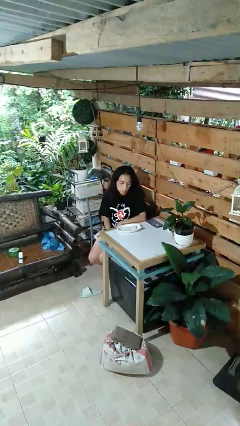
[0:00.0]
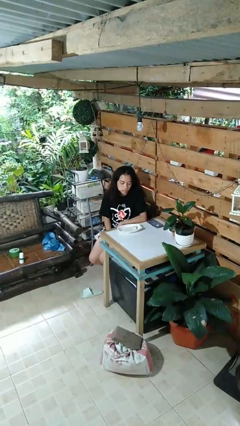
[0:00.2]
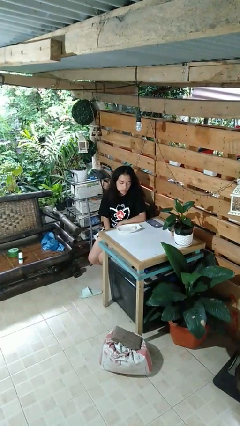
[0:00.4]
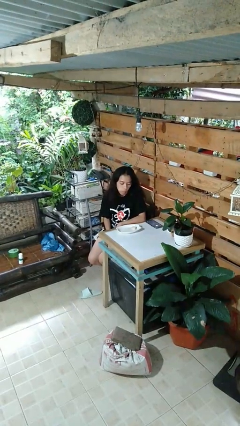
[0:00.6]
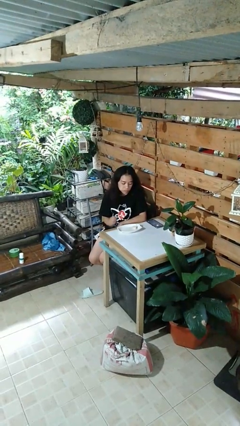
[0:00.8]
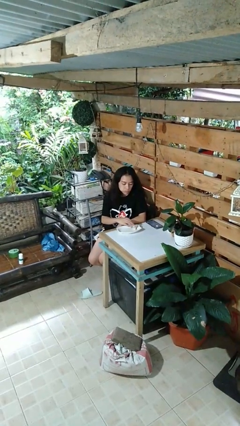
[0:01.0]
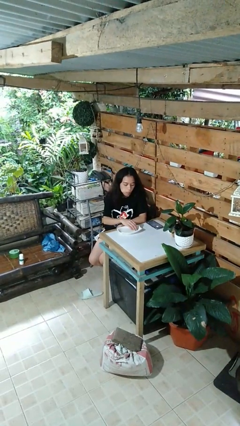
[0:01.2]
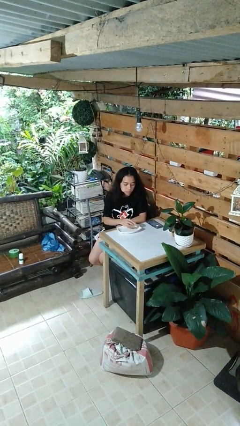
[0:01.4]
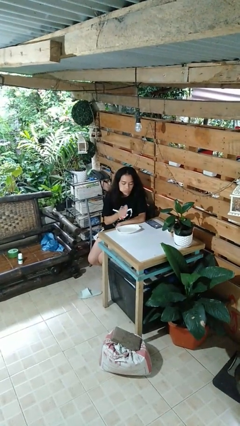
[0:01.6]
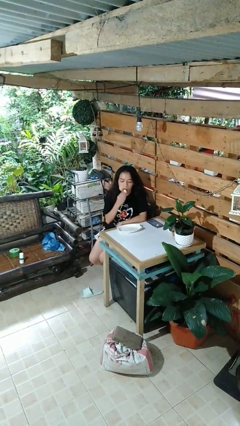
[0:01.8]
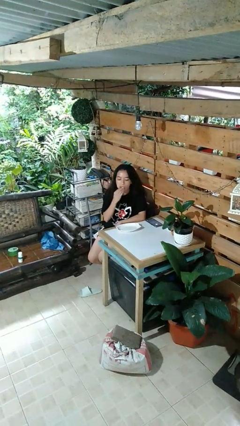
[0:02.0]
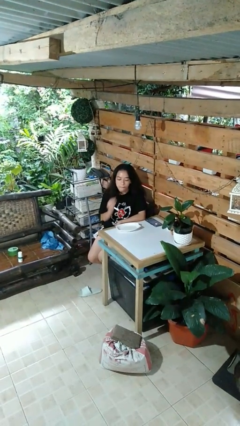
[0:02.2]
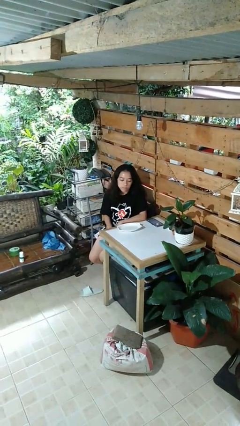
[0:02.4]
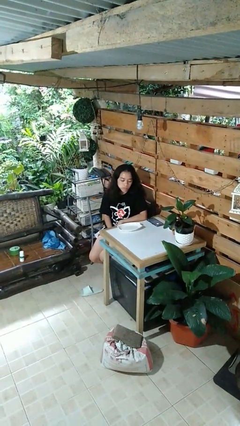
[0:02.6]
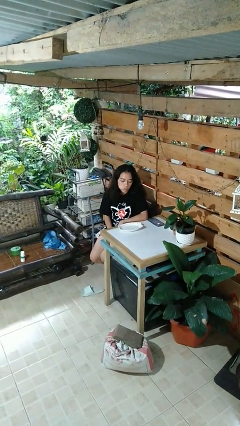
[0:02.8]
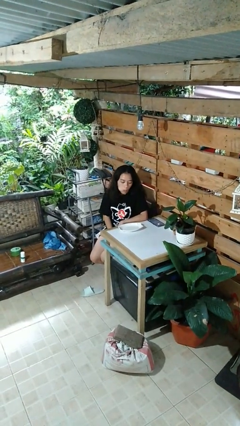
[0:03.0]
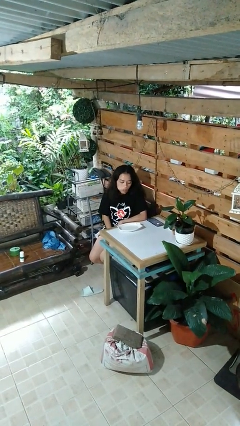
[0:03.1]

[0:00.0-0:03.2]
person eats with hands

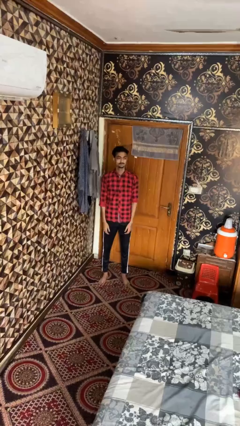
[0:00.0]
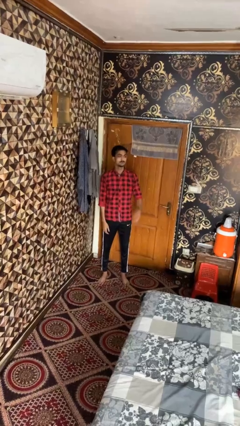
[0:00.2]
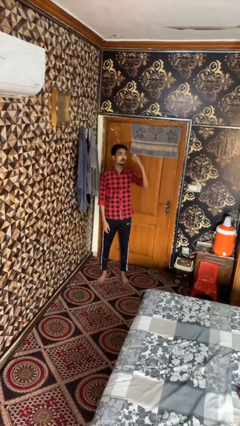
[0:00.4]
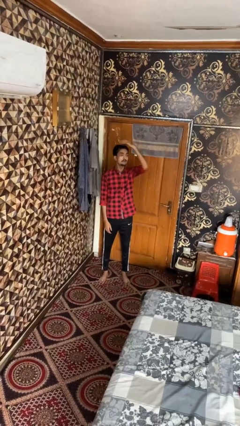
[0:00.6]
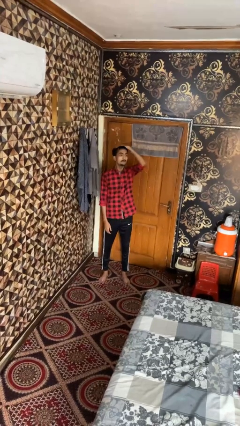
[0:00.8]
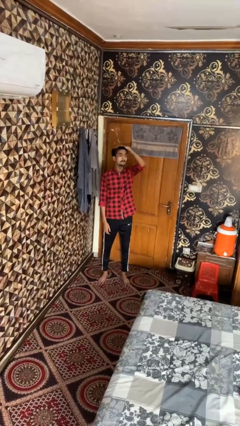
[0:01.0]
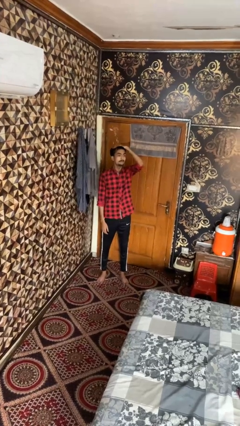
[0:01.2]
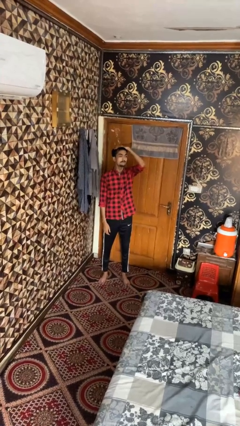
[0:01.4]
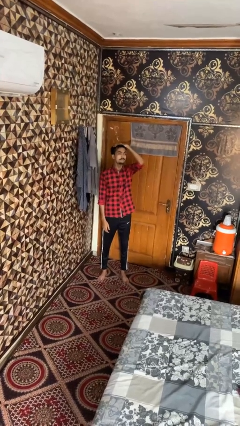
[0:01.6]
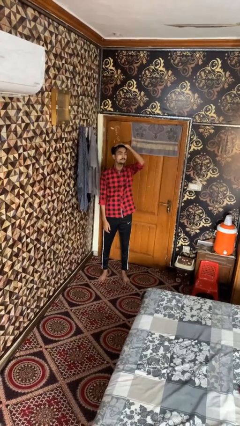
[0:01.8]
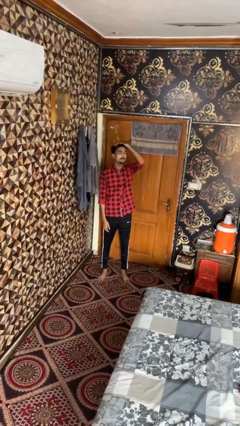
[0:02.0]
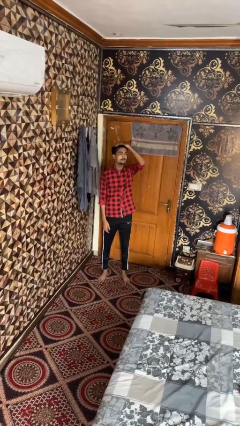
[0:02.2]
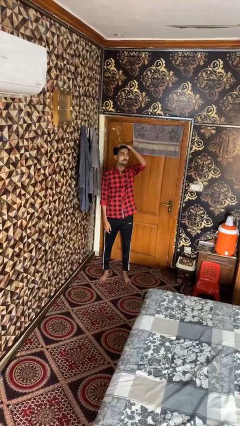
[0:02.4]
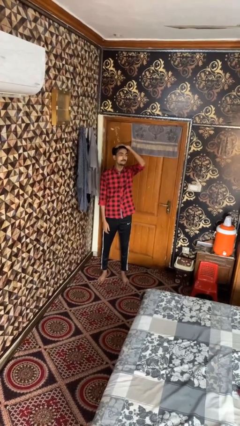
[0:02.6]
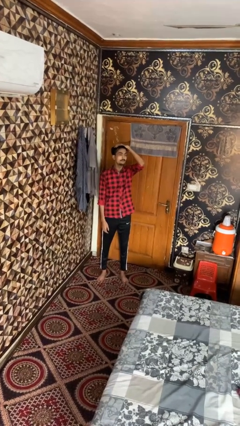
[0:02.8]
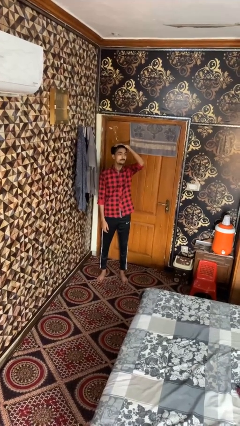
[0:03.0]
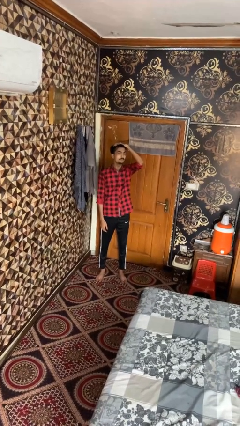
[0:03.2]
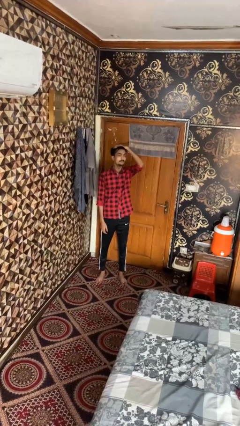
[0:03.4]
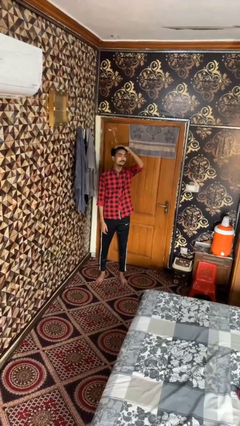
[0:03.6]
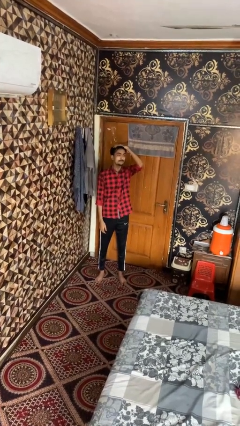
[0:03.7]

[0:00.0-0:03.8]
person pats head

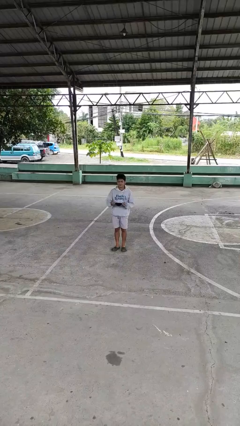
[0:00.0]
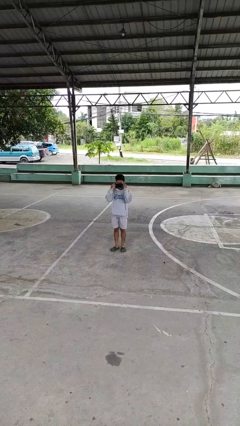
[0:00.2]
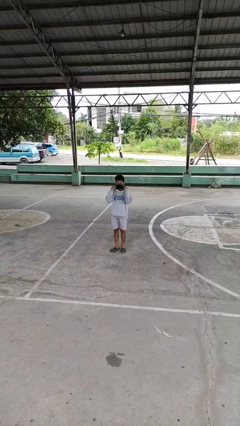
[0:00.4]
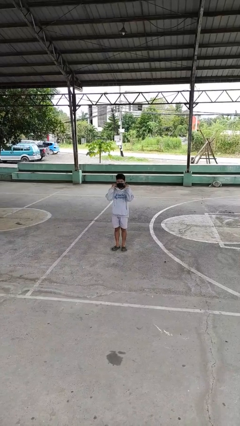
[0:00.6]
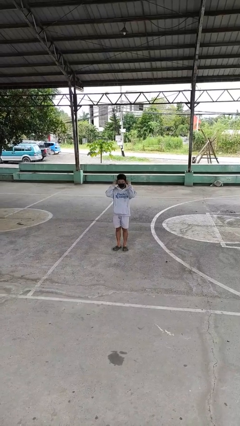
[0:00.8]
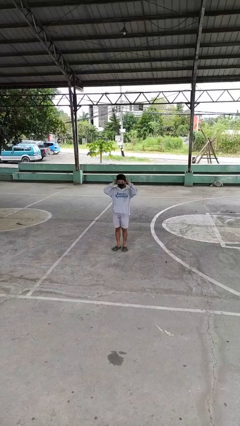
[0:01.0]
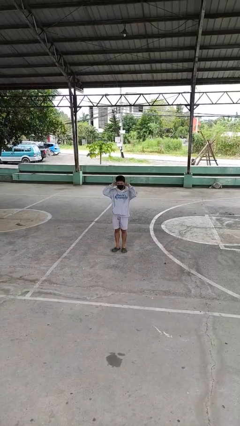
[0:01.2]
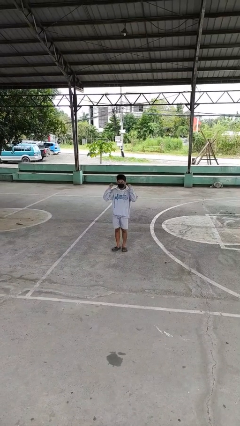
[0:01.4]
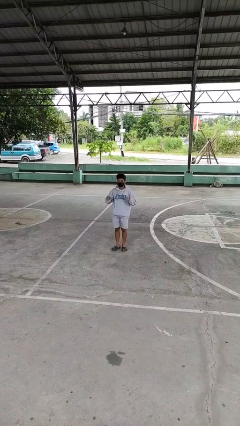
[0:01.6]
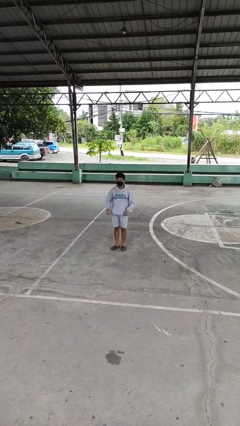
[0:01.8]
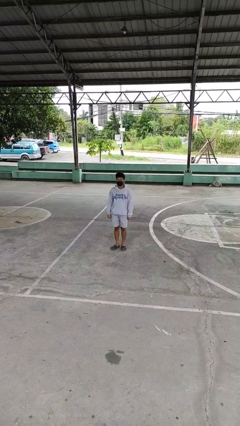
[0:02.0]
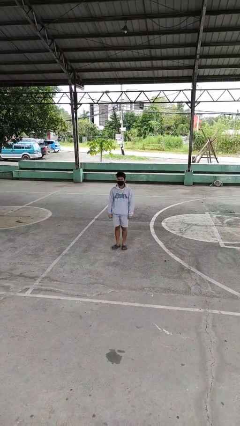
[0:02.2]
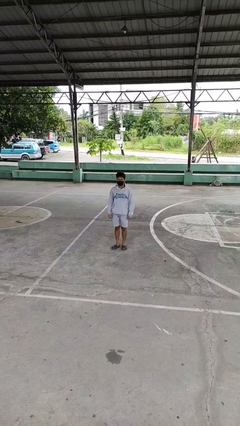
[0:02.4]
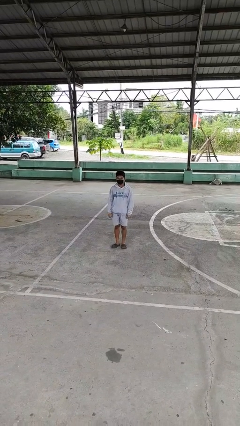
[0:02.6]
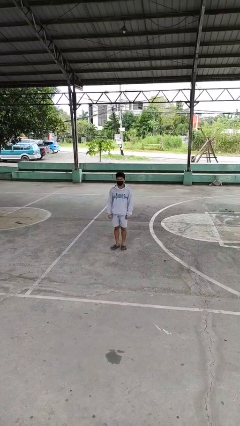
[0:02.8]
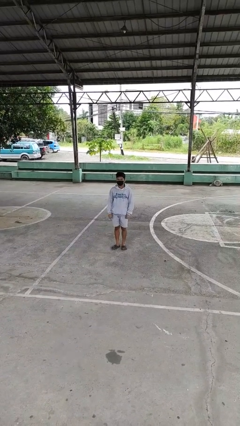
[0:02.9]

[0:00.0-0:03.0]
person puts on facemask

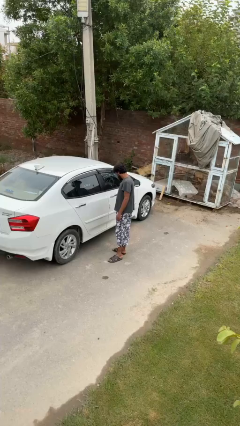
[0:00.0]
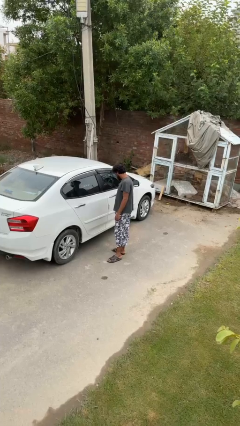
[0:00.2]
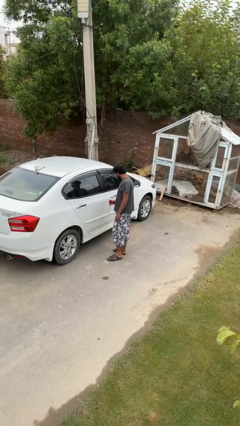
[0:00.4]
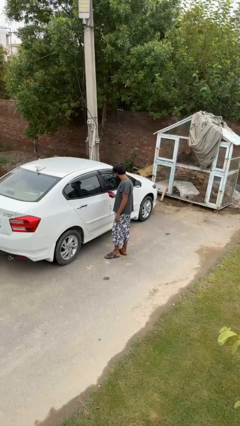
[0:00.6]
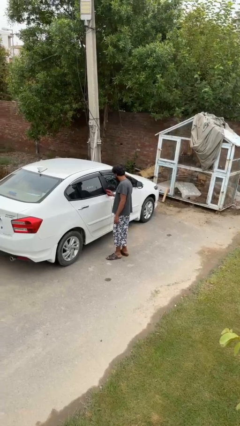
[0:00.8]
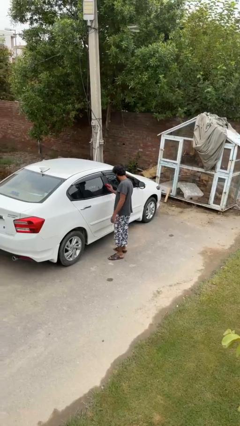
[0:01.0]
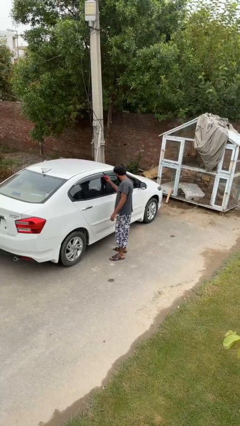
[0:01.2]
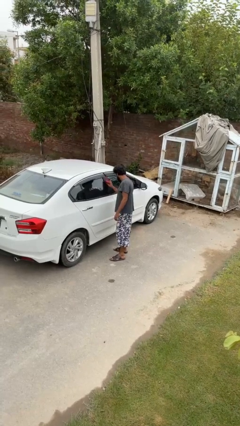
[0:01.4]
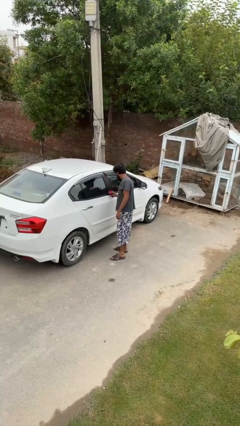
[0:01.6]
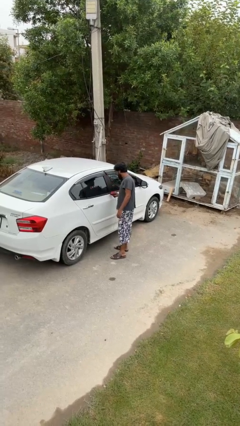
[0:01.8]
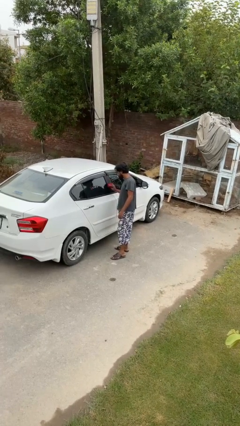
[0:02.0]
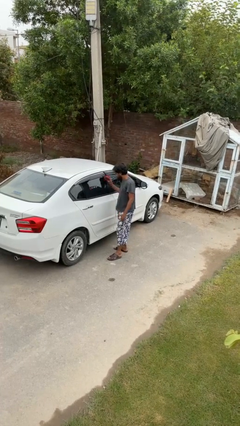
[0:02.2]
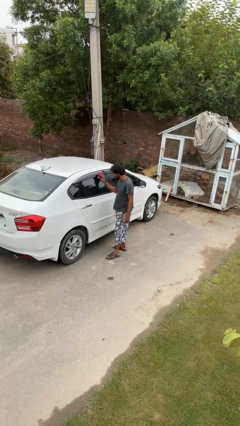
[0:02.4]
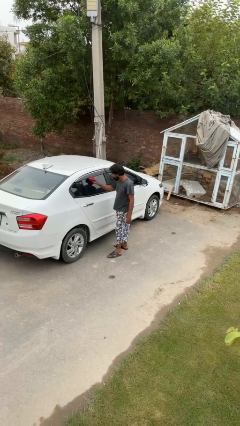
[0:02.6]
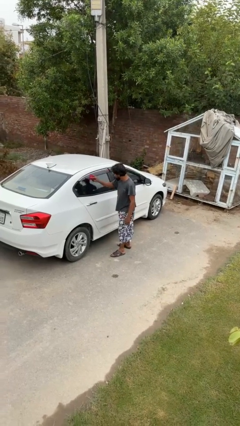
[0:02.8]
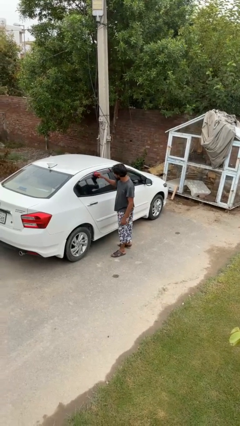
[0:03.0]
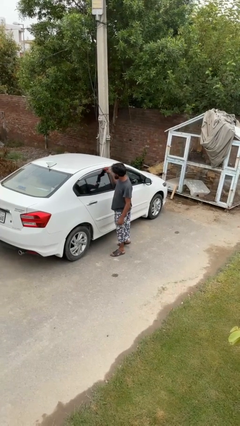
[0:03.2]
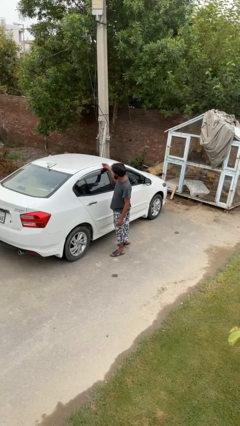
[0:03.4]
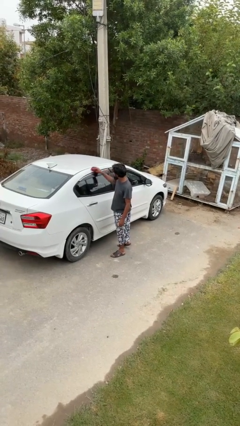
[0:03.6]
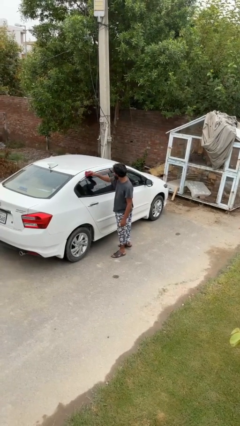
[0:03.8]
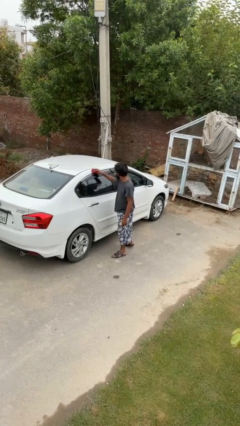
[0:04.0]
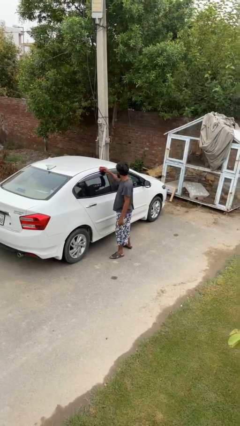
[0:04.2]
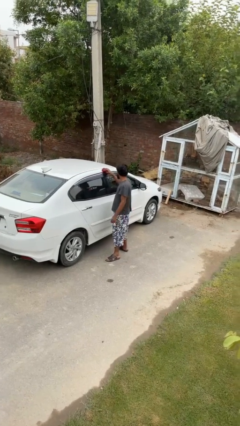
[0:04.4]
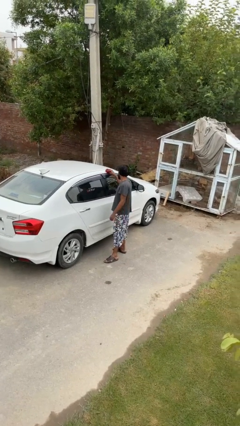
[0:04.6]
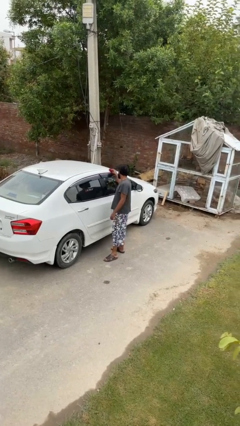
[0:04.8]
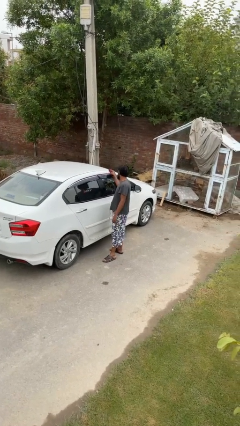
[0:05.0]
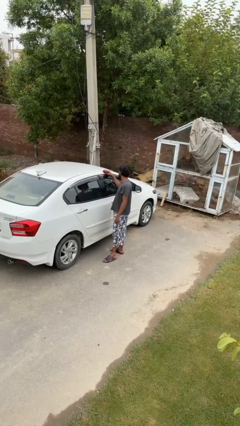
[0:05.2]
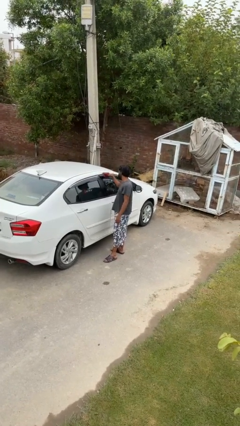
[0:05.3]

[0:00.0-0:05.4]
person polishes car with rag

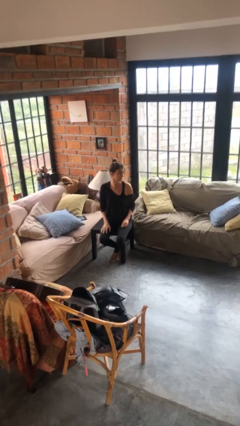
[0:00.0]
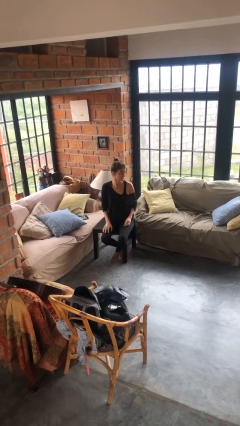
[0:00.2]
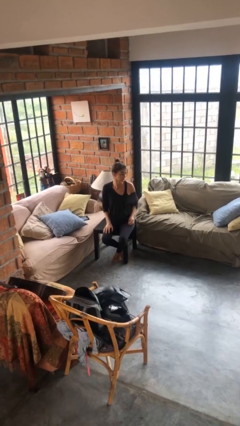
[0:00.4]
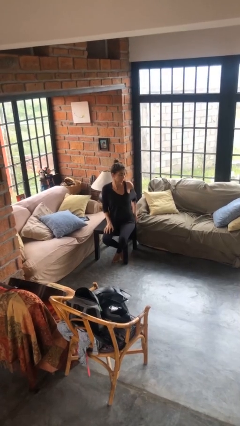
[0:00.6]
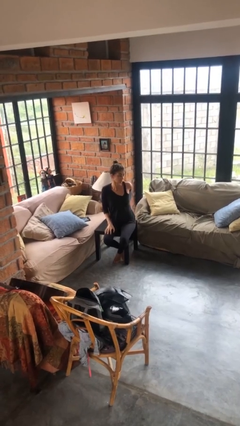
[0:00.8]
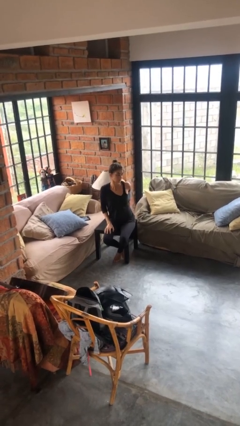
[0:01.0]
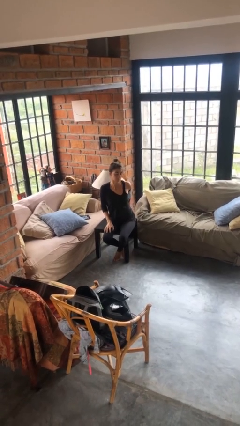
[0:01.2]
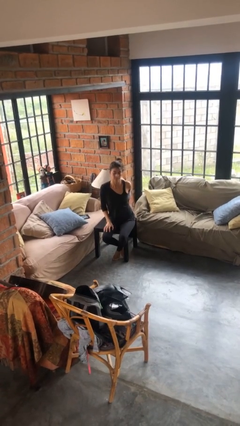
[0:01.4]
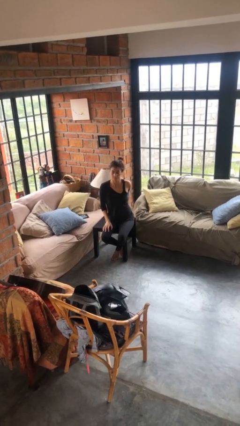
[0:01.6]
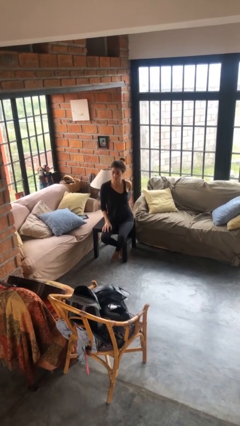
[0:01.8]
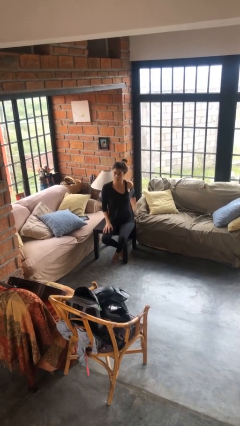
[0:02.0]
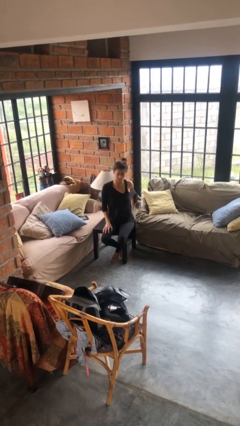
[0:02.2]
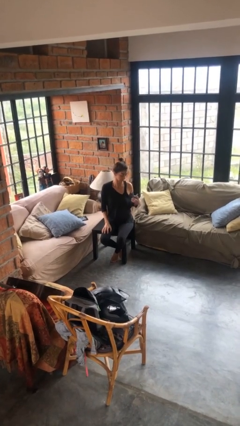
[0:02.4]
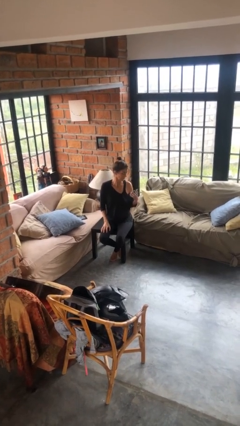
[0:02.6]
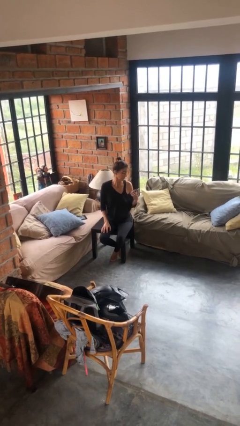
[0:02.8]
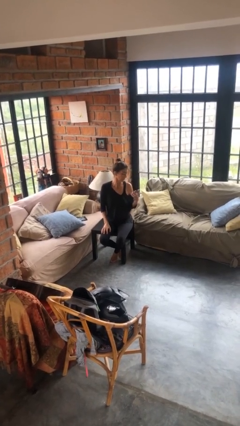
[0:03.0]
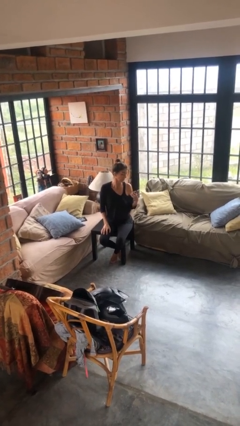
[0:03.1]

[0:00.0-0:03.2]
person takes phone from pocket
